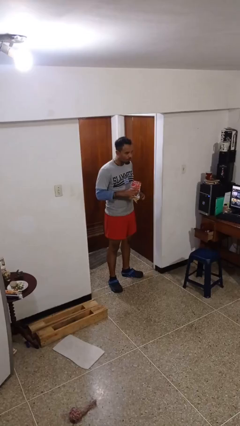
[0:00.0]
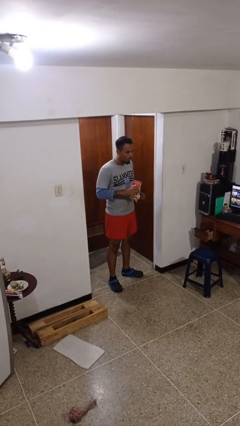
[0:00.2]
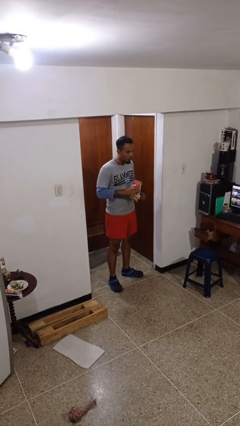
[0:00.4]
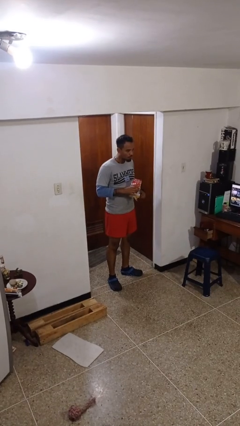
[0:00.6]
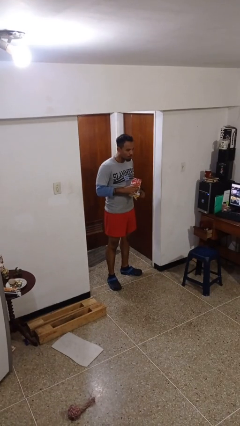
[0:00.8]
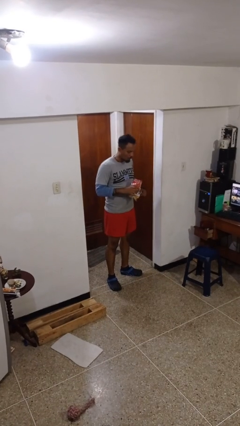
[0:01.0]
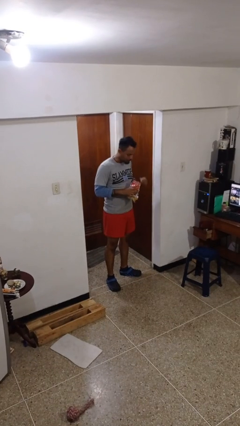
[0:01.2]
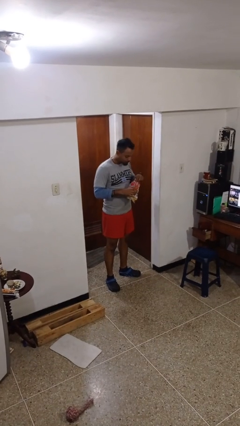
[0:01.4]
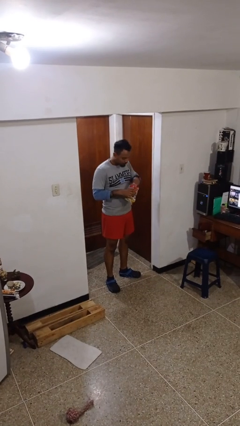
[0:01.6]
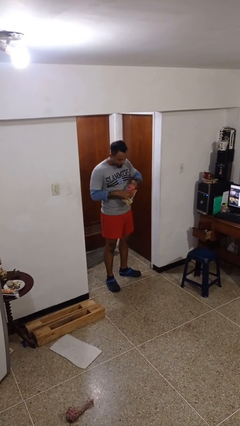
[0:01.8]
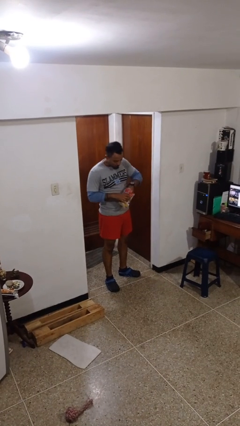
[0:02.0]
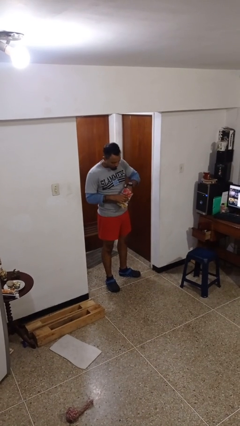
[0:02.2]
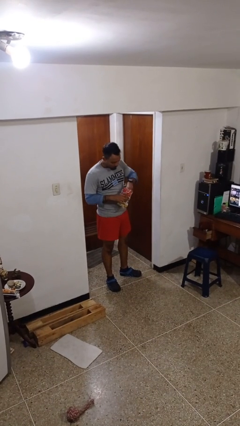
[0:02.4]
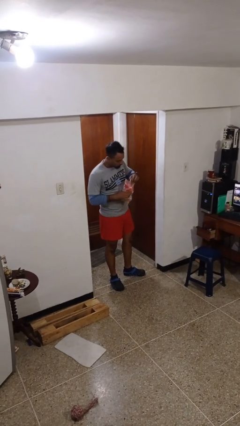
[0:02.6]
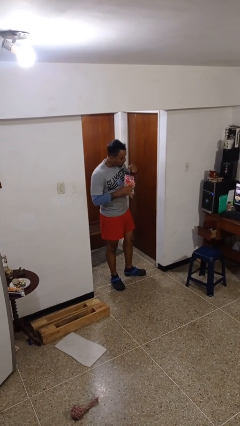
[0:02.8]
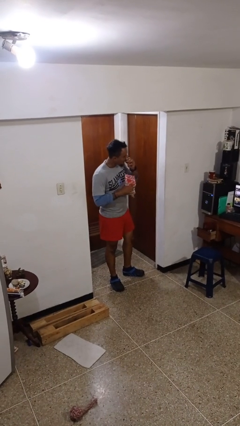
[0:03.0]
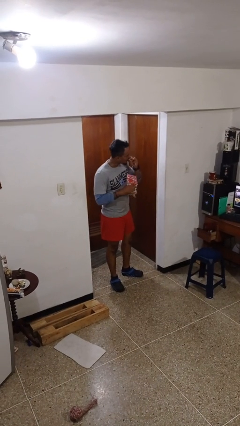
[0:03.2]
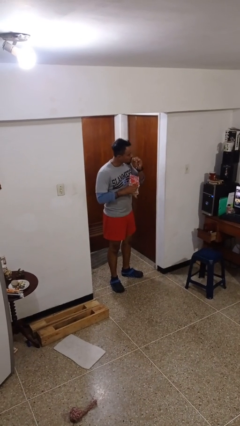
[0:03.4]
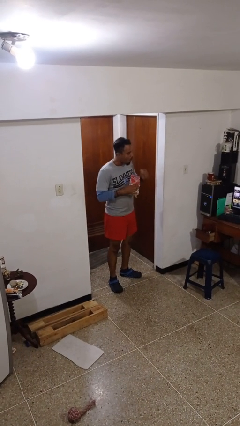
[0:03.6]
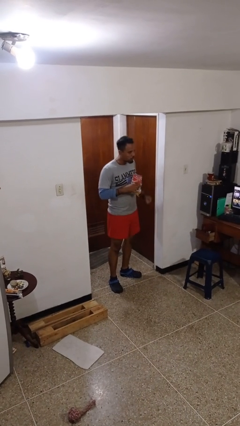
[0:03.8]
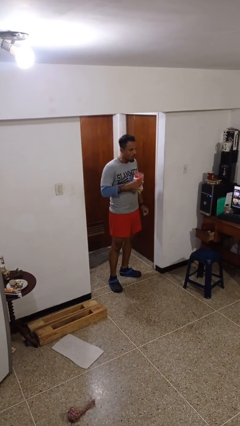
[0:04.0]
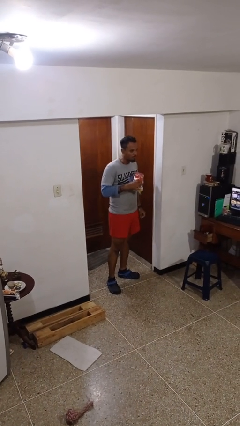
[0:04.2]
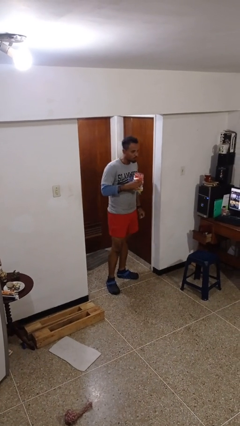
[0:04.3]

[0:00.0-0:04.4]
person eats snack from bag

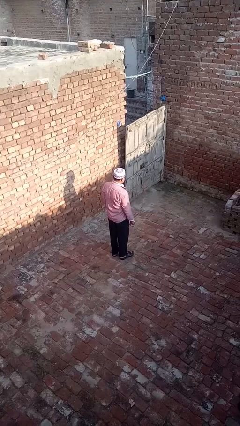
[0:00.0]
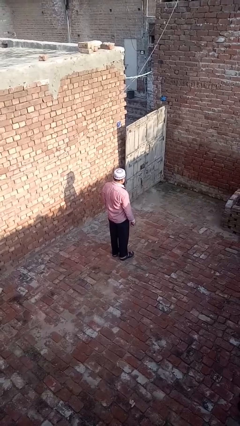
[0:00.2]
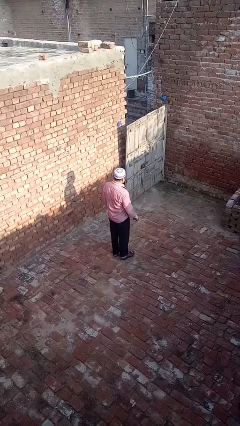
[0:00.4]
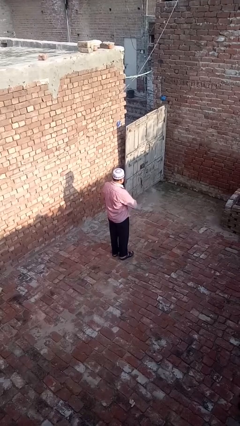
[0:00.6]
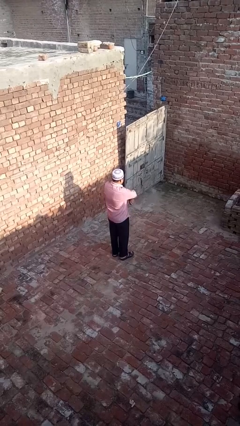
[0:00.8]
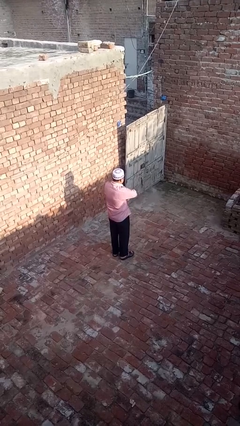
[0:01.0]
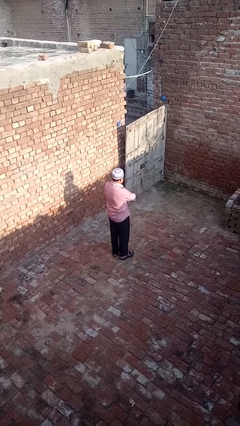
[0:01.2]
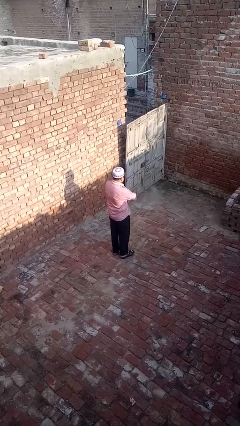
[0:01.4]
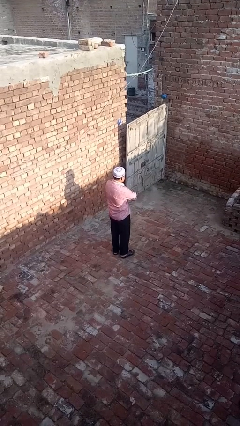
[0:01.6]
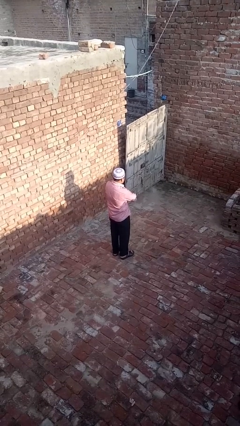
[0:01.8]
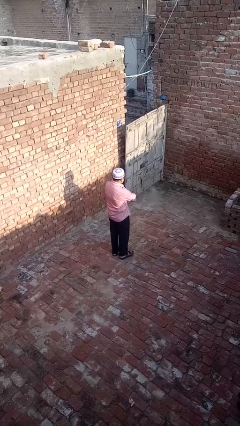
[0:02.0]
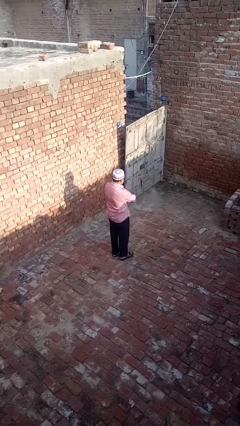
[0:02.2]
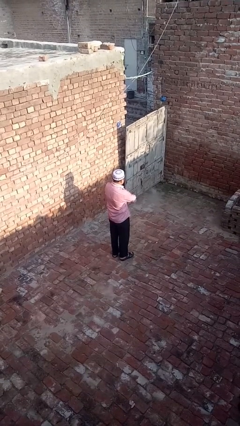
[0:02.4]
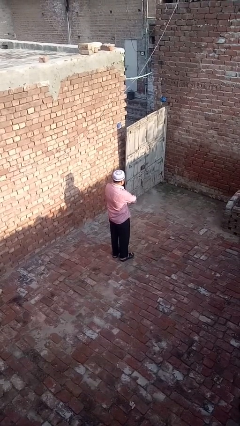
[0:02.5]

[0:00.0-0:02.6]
person crosses arms

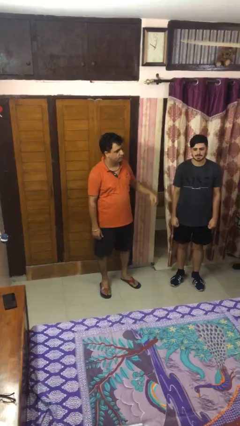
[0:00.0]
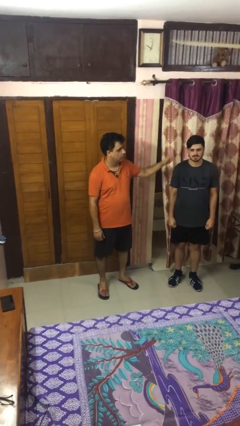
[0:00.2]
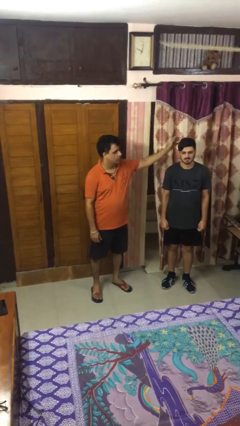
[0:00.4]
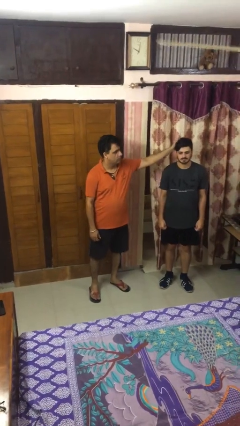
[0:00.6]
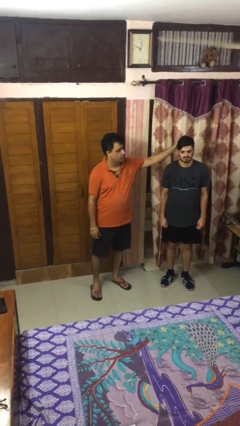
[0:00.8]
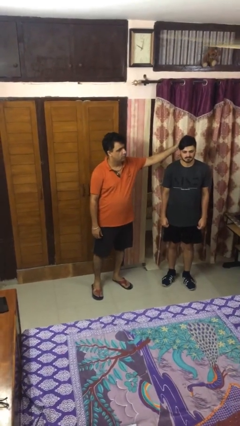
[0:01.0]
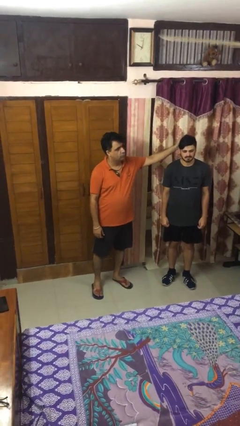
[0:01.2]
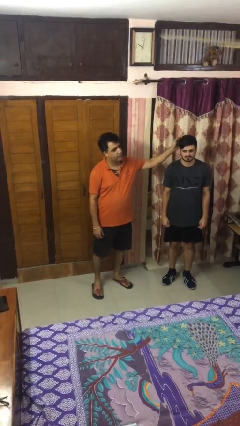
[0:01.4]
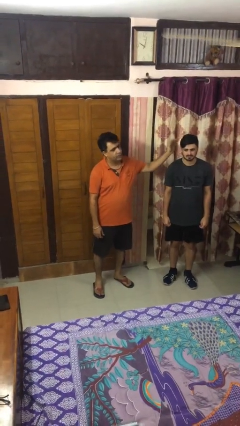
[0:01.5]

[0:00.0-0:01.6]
person grabs person by hair

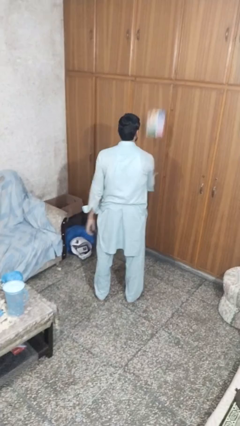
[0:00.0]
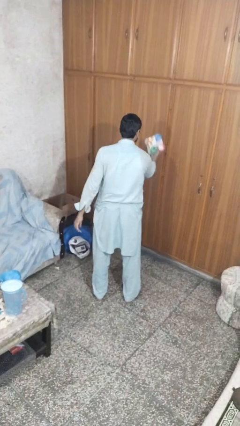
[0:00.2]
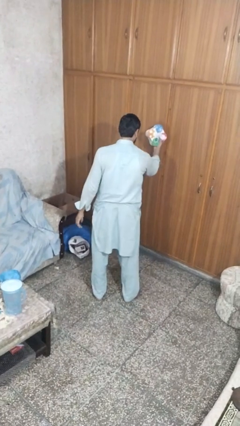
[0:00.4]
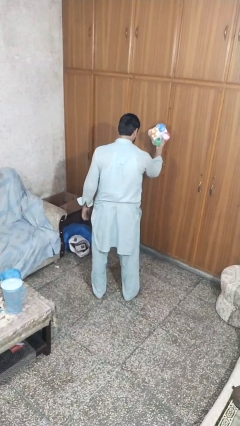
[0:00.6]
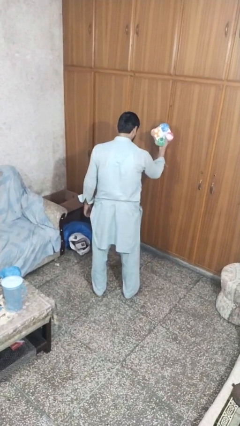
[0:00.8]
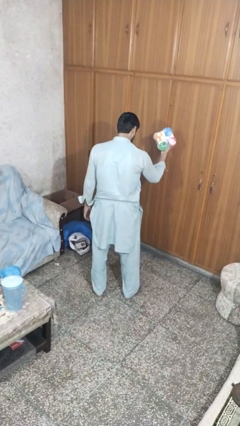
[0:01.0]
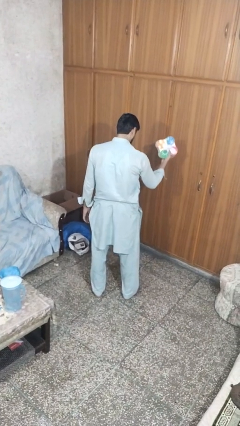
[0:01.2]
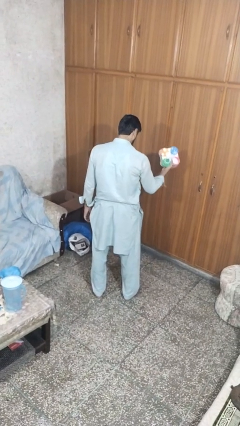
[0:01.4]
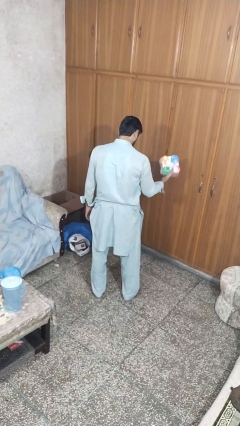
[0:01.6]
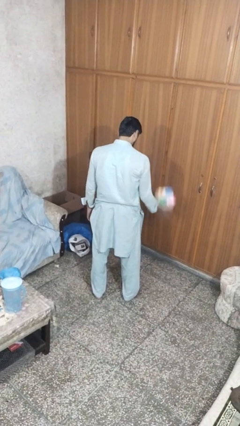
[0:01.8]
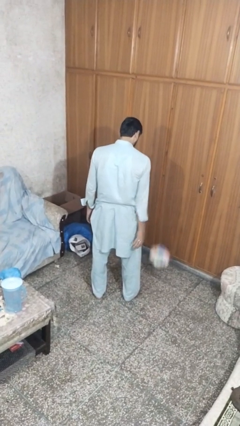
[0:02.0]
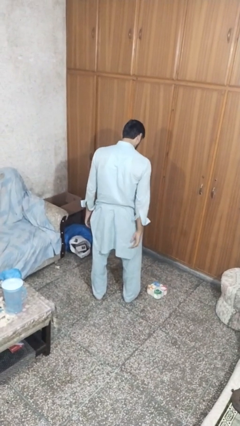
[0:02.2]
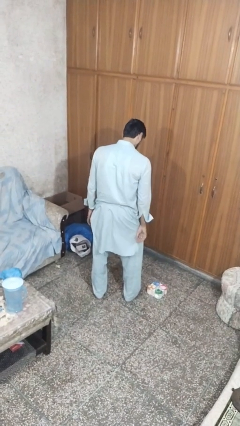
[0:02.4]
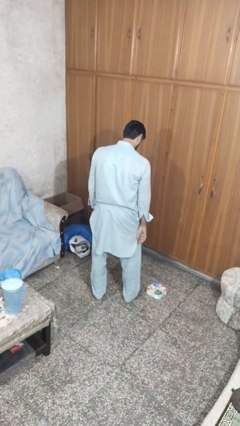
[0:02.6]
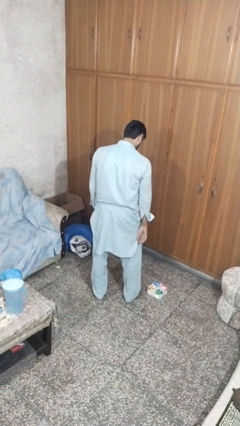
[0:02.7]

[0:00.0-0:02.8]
person catches dropped object

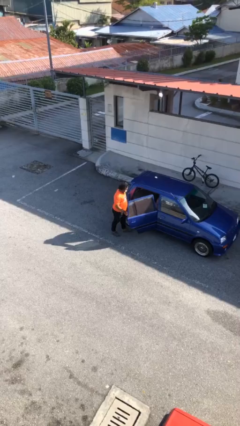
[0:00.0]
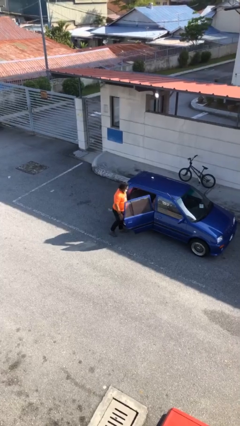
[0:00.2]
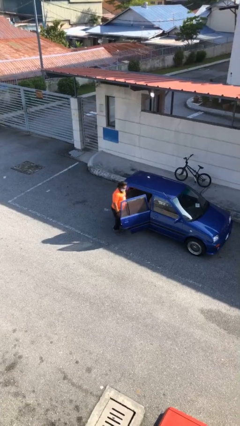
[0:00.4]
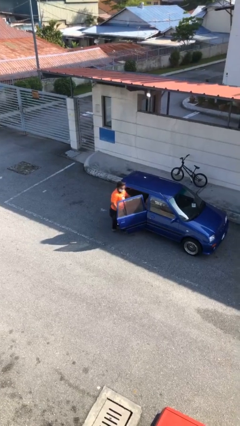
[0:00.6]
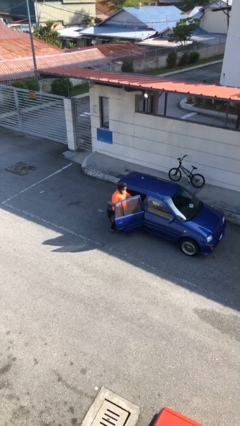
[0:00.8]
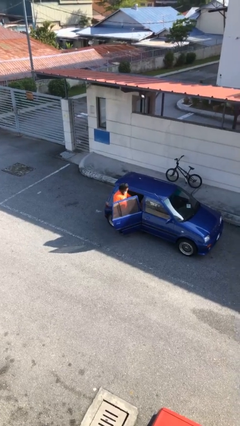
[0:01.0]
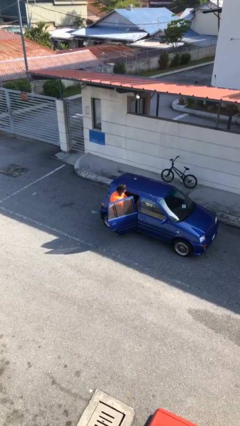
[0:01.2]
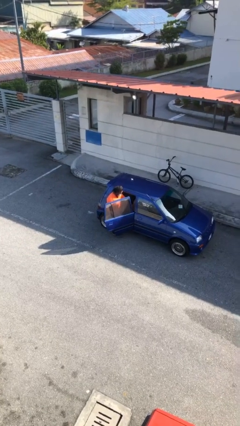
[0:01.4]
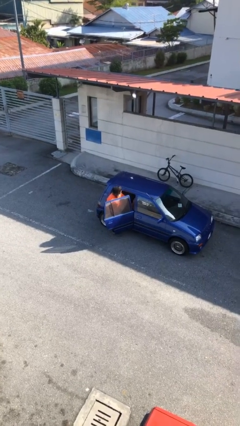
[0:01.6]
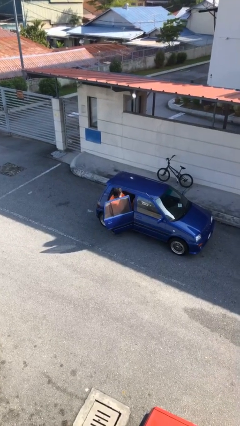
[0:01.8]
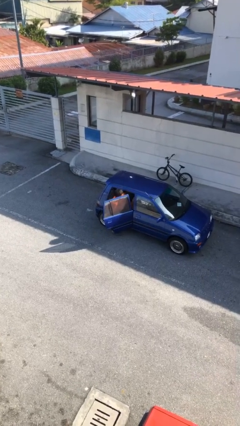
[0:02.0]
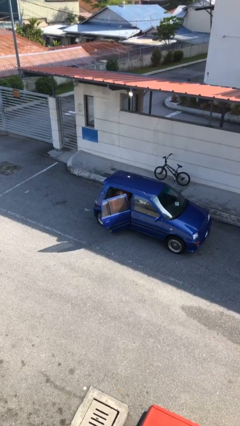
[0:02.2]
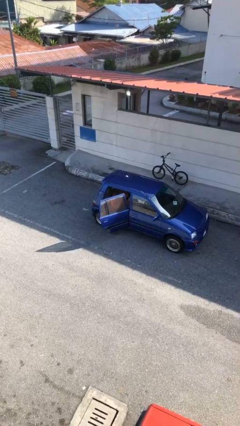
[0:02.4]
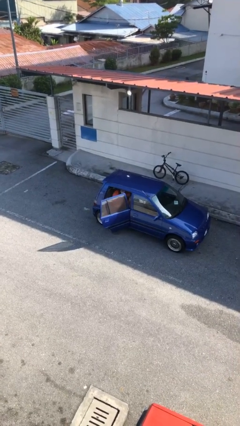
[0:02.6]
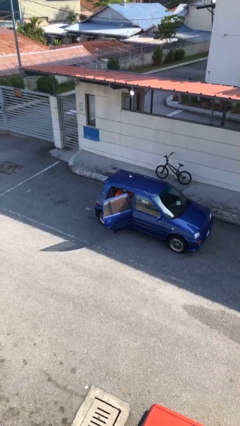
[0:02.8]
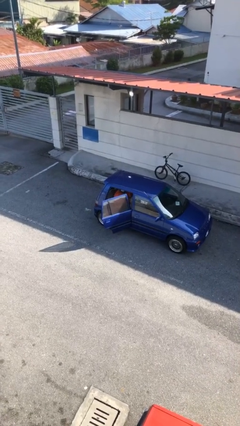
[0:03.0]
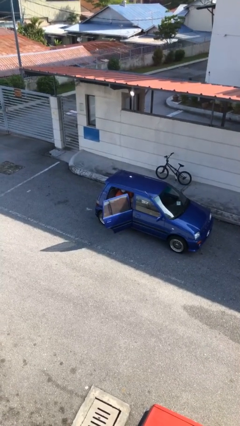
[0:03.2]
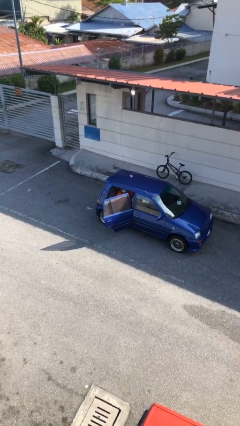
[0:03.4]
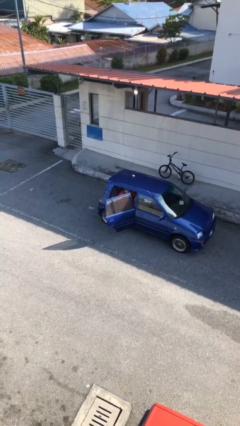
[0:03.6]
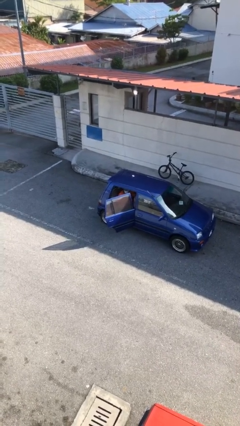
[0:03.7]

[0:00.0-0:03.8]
person enters car

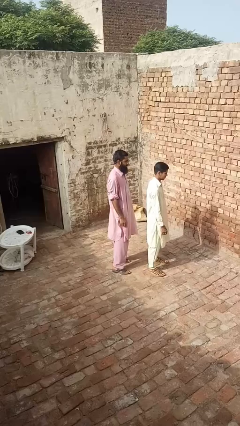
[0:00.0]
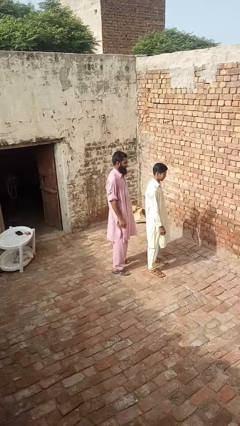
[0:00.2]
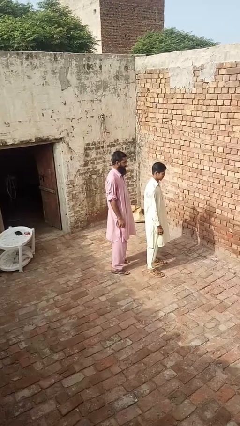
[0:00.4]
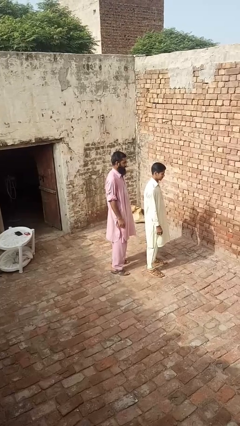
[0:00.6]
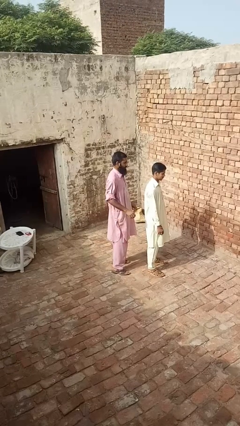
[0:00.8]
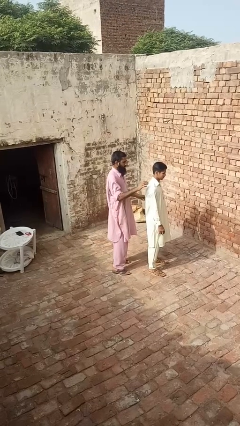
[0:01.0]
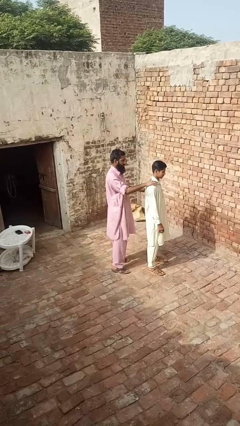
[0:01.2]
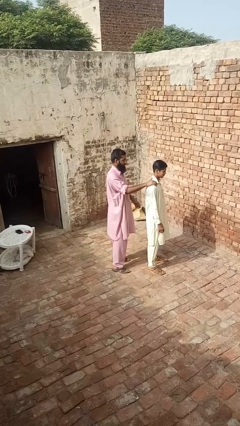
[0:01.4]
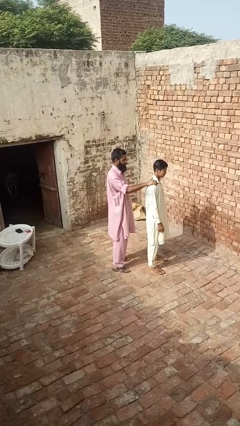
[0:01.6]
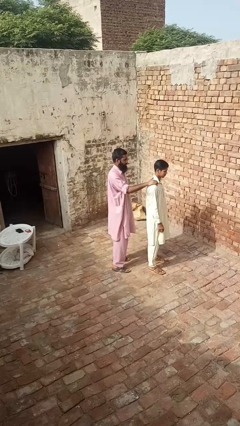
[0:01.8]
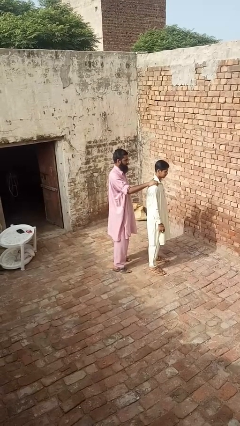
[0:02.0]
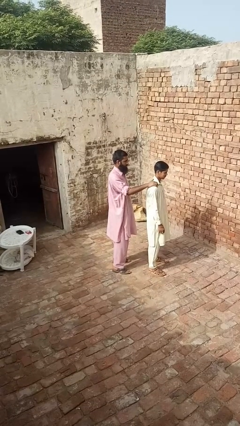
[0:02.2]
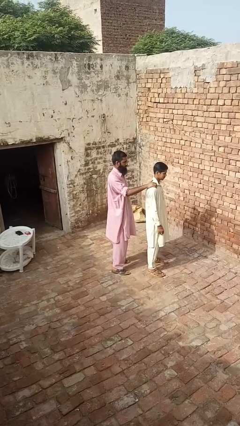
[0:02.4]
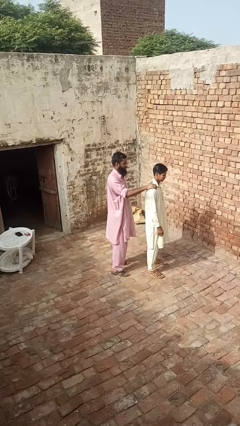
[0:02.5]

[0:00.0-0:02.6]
person grabs person by shoulder
